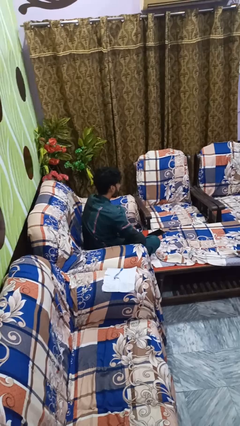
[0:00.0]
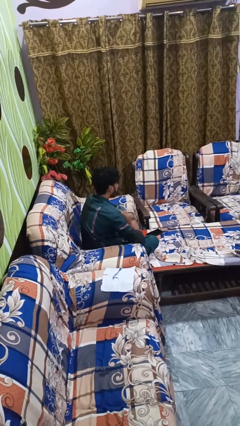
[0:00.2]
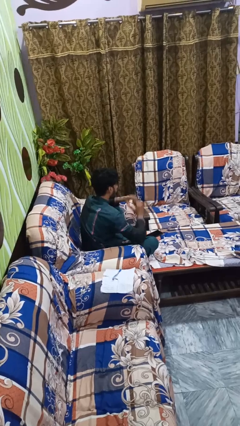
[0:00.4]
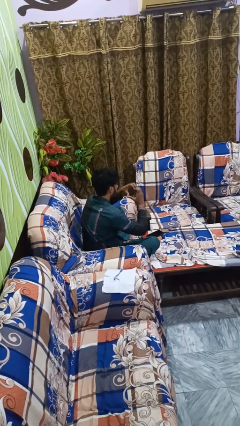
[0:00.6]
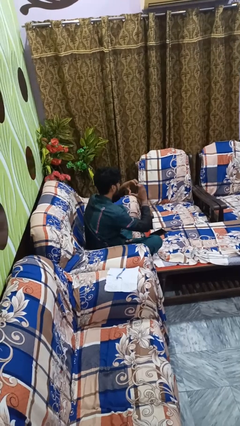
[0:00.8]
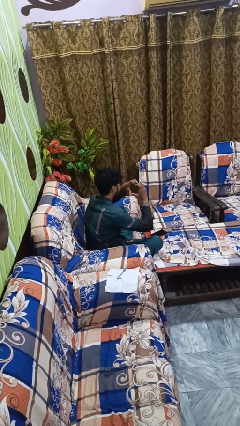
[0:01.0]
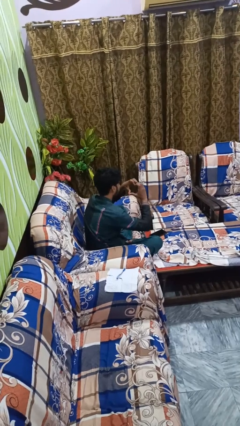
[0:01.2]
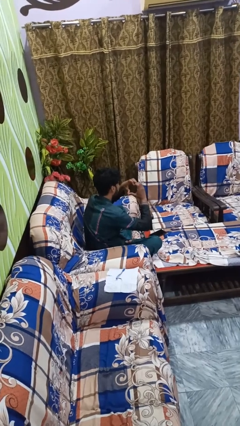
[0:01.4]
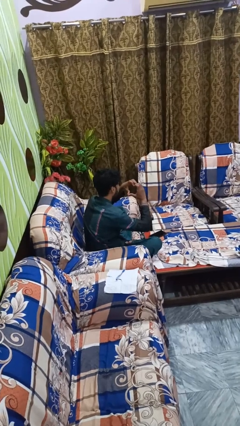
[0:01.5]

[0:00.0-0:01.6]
person gestures heart

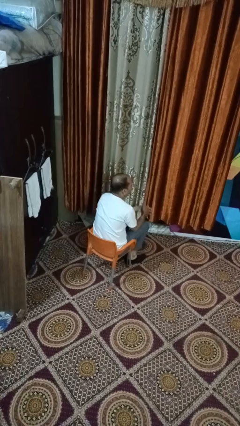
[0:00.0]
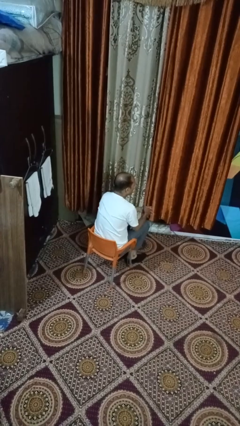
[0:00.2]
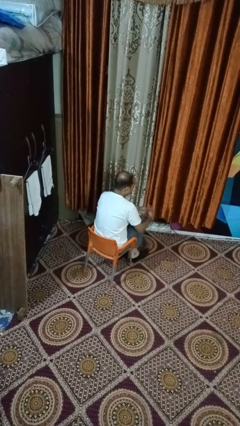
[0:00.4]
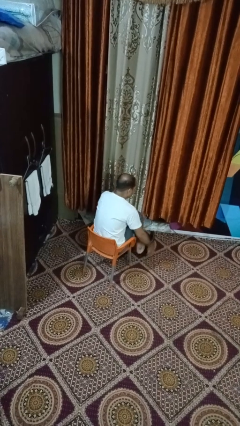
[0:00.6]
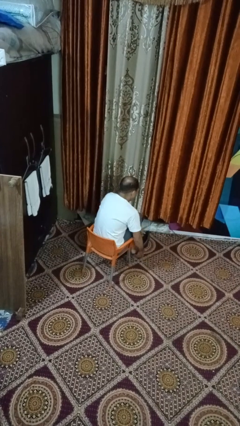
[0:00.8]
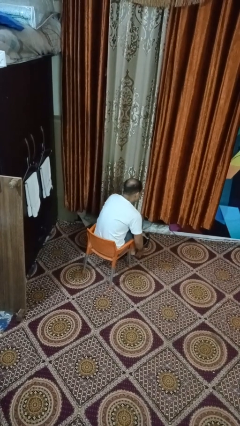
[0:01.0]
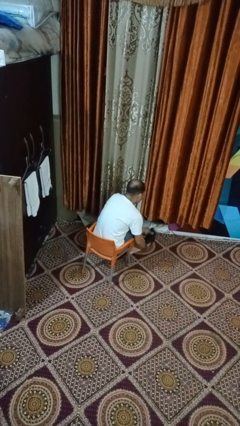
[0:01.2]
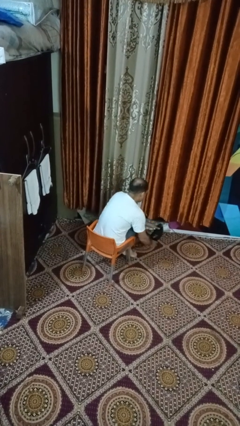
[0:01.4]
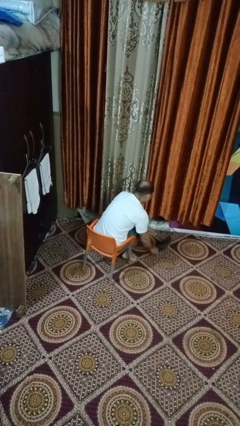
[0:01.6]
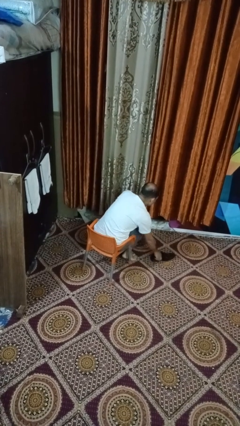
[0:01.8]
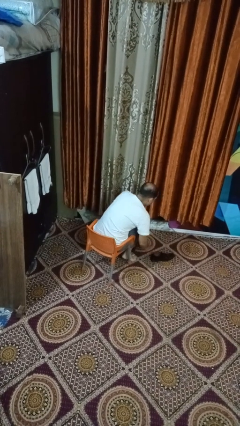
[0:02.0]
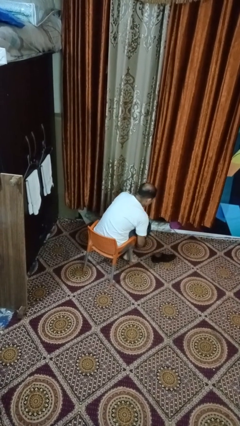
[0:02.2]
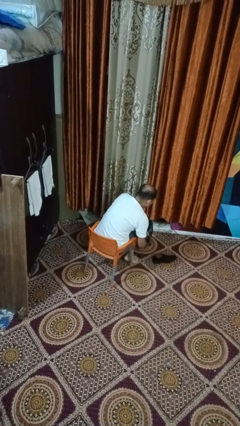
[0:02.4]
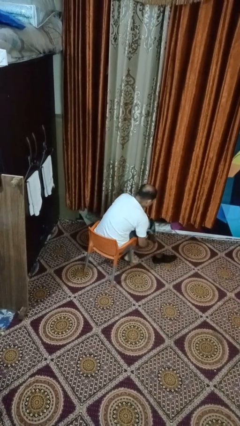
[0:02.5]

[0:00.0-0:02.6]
person takes off shoes

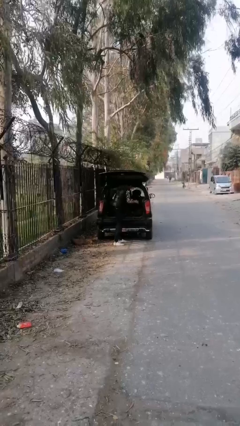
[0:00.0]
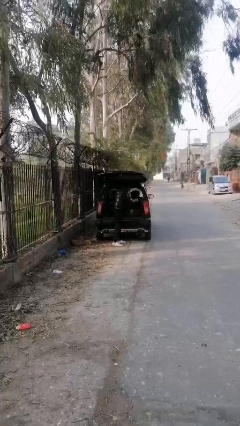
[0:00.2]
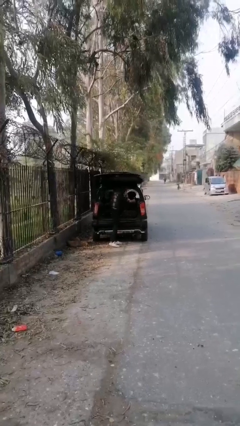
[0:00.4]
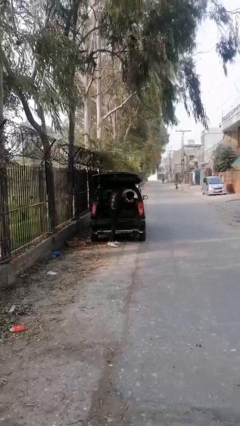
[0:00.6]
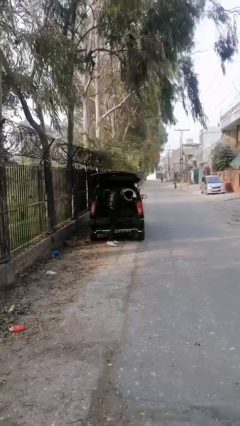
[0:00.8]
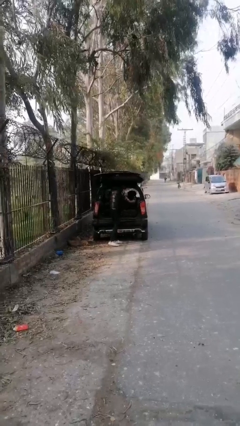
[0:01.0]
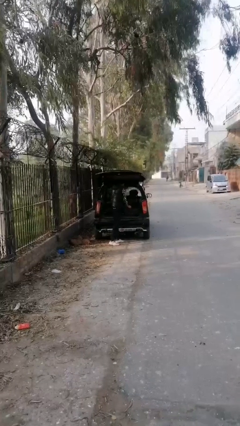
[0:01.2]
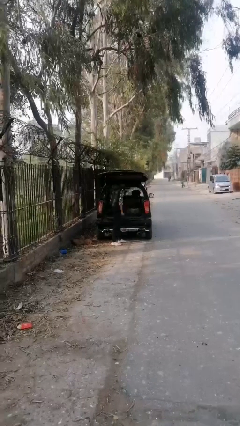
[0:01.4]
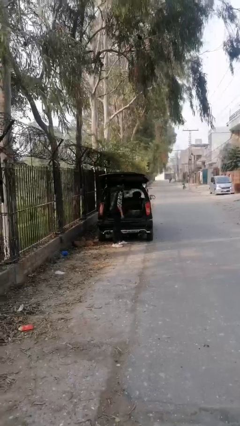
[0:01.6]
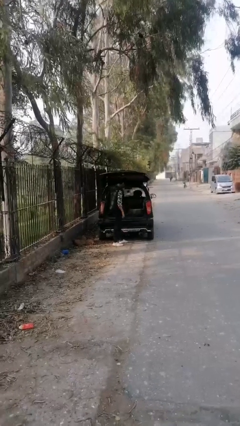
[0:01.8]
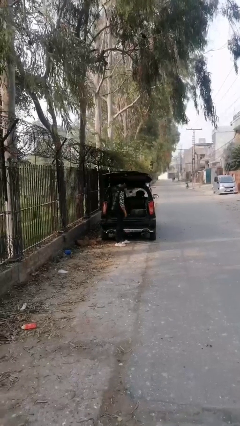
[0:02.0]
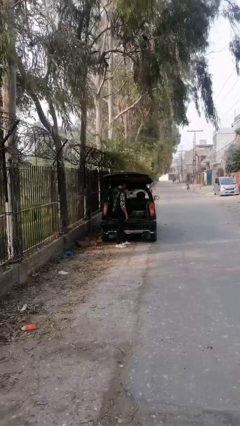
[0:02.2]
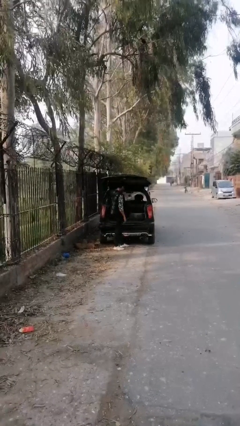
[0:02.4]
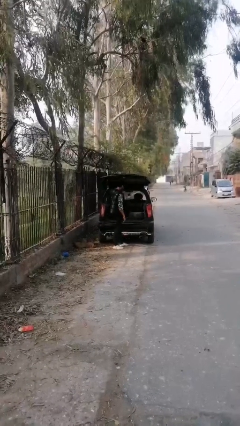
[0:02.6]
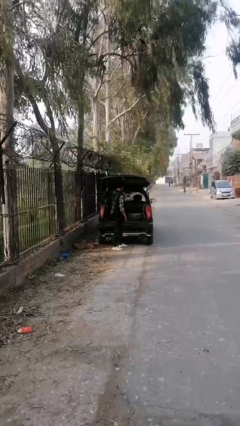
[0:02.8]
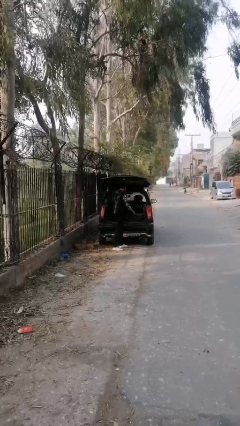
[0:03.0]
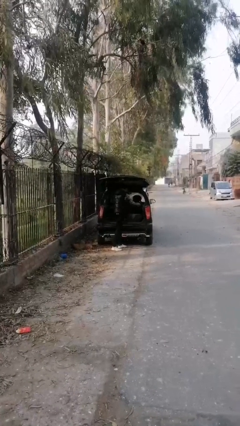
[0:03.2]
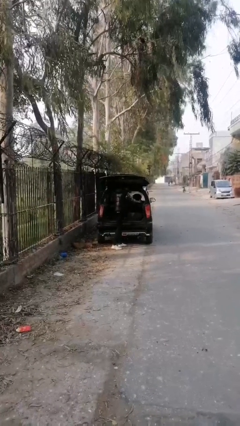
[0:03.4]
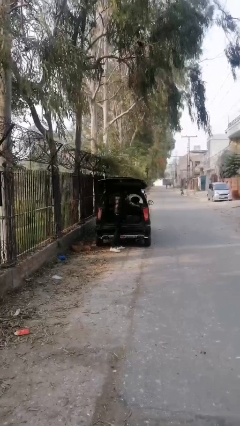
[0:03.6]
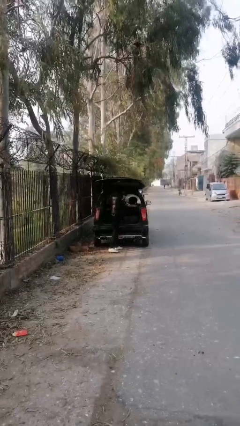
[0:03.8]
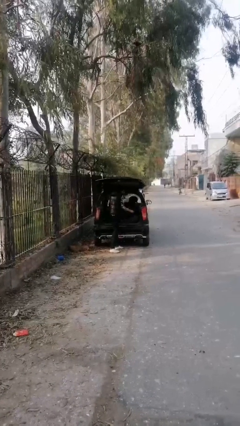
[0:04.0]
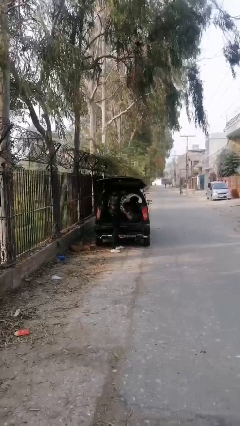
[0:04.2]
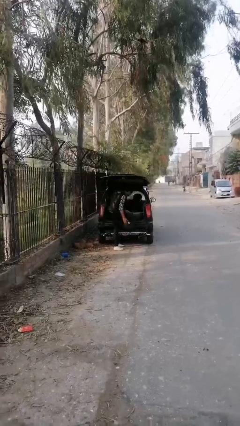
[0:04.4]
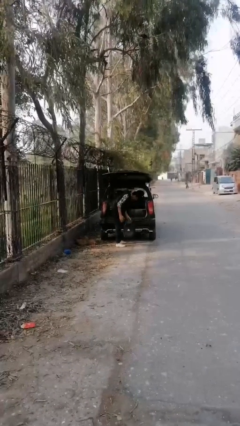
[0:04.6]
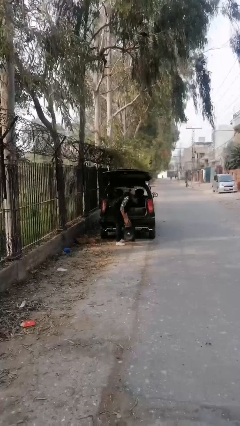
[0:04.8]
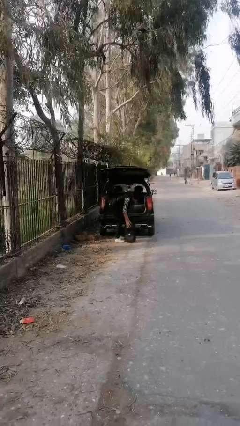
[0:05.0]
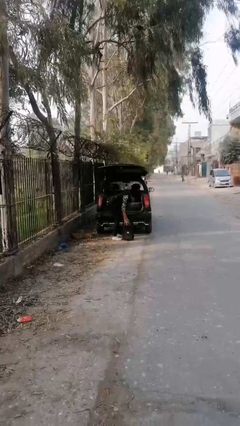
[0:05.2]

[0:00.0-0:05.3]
person loads car

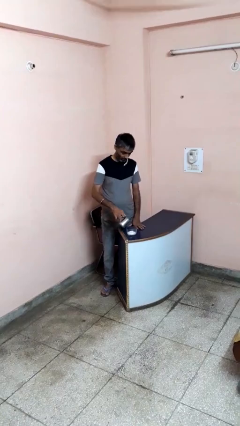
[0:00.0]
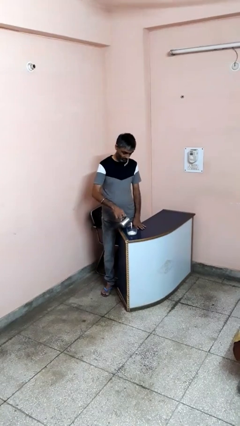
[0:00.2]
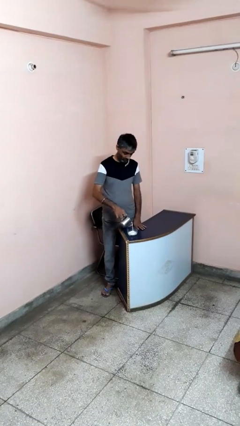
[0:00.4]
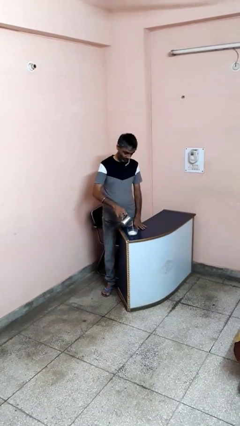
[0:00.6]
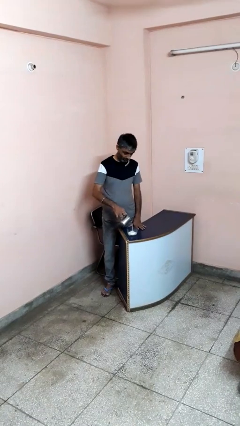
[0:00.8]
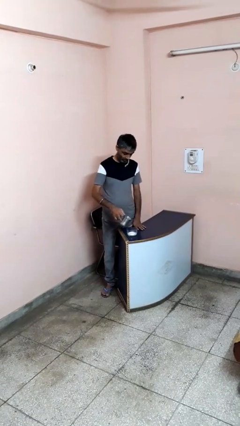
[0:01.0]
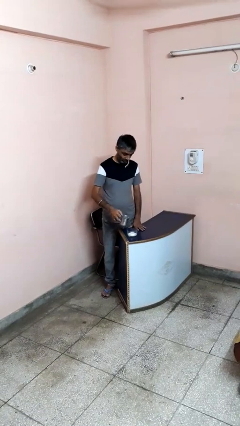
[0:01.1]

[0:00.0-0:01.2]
person pours into bowl

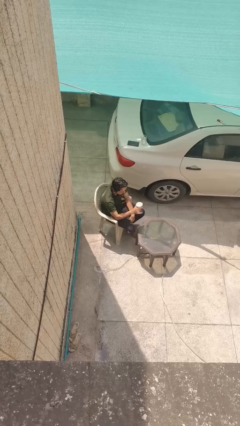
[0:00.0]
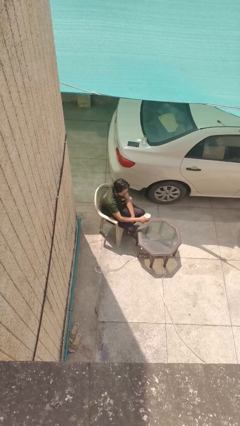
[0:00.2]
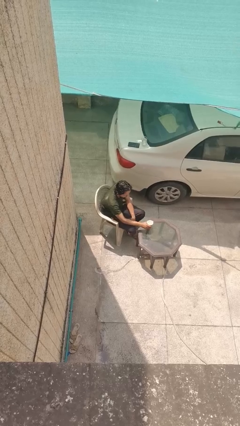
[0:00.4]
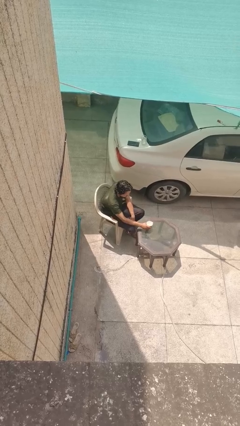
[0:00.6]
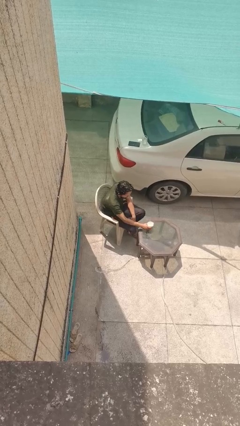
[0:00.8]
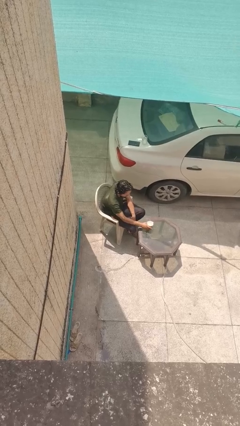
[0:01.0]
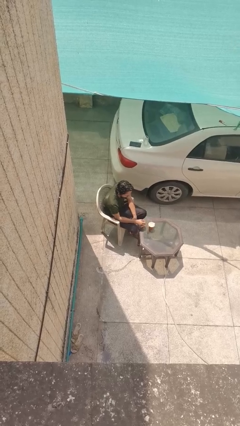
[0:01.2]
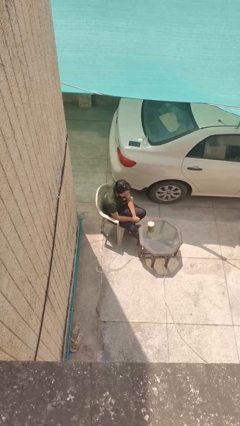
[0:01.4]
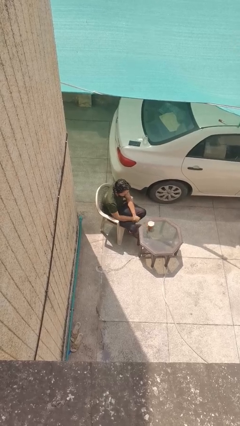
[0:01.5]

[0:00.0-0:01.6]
person puts down object on table

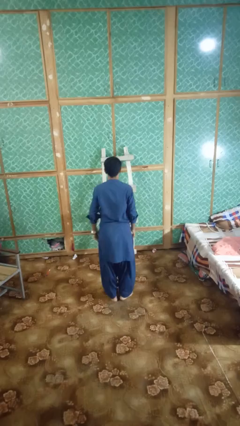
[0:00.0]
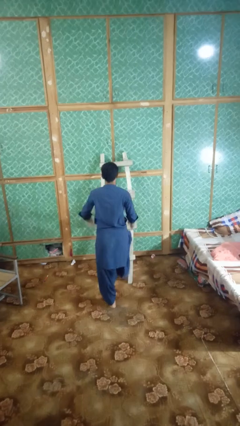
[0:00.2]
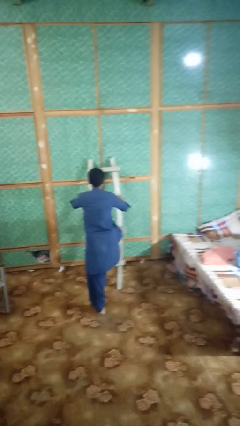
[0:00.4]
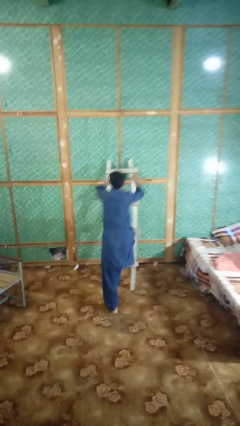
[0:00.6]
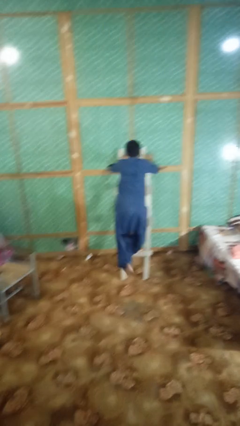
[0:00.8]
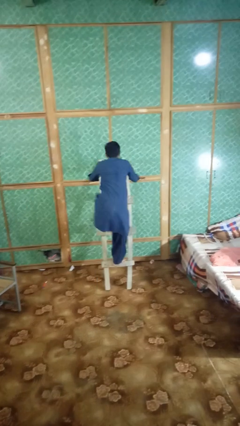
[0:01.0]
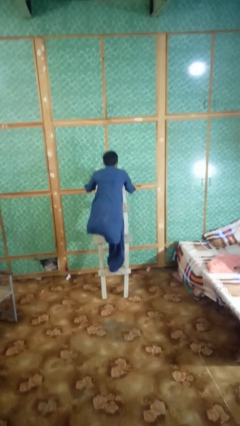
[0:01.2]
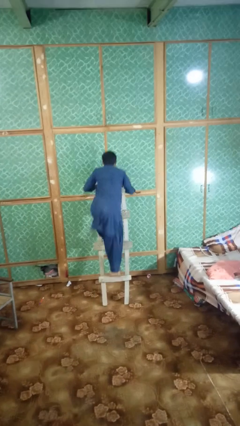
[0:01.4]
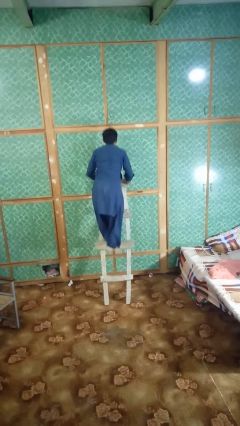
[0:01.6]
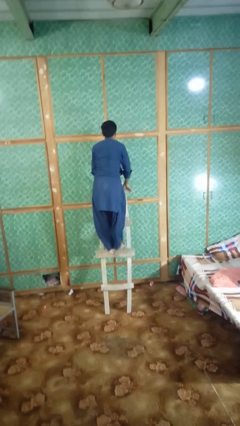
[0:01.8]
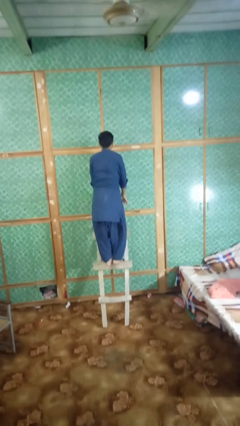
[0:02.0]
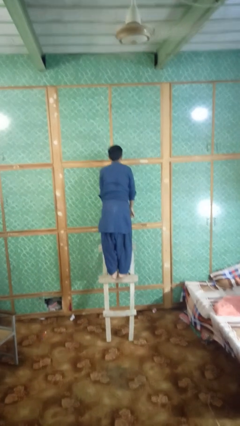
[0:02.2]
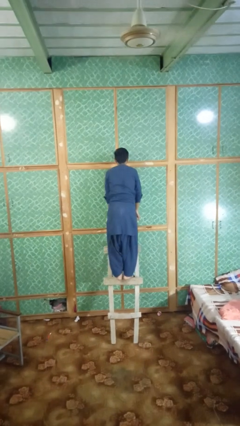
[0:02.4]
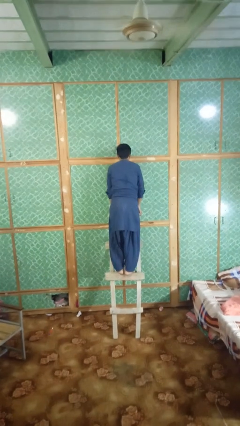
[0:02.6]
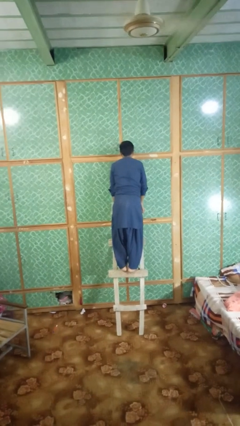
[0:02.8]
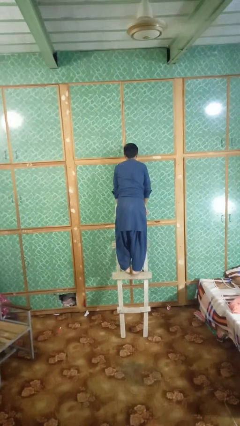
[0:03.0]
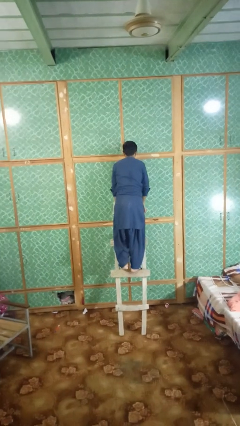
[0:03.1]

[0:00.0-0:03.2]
person climbs up ladder

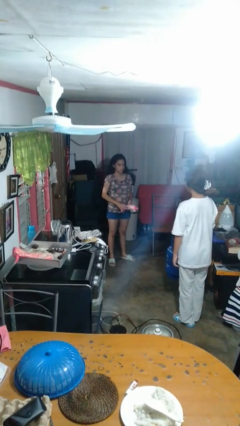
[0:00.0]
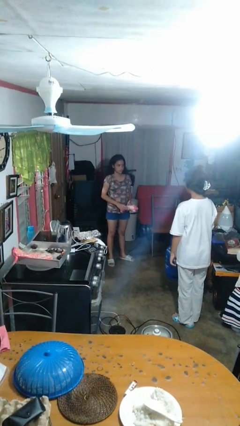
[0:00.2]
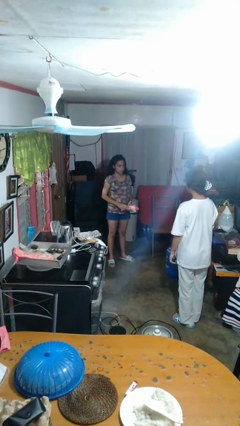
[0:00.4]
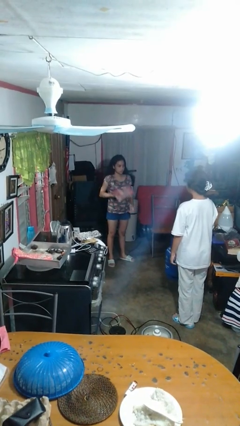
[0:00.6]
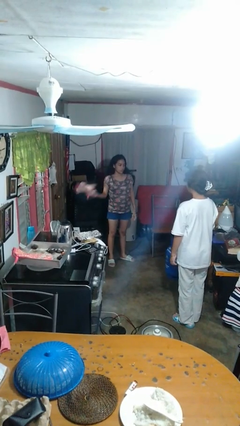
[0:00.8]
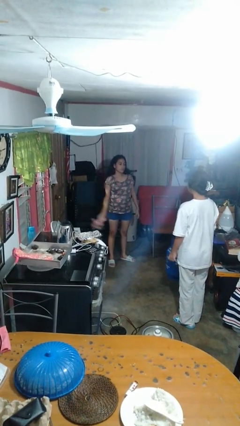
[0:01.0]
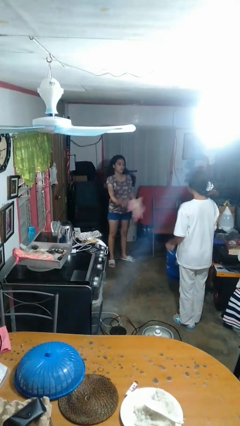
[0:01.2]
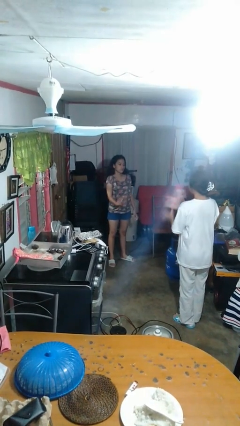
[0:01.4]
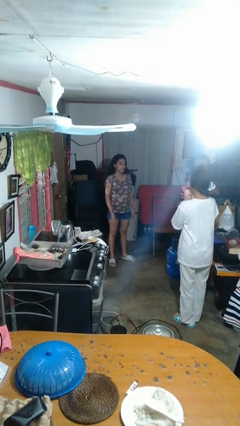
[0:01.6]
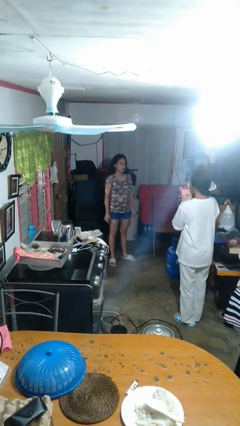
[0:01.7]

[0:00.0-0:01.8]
person throws object to person
